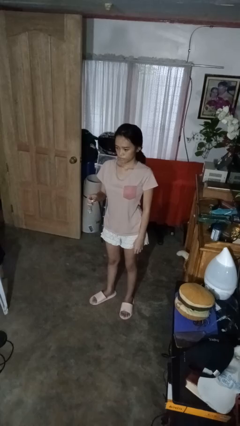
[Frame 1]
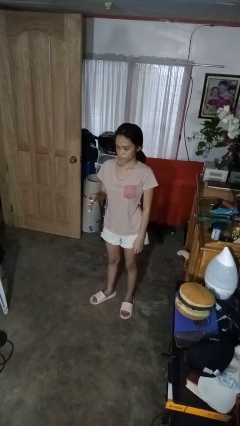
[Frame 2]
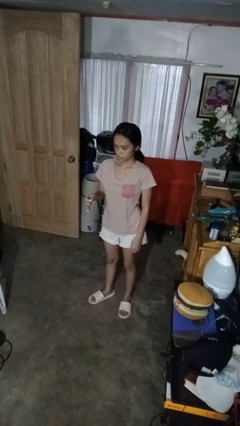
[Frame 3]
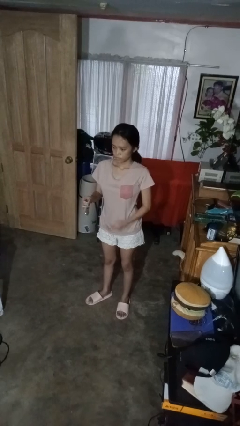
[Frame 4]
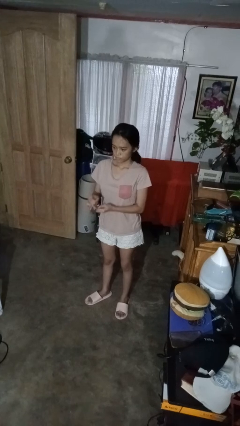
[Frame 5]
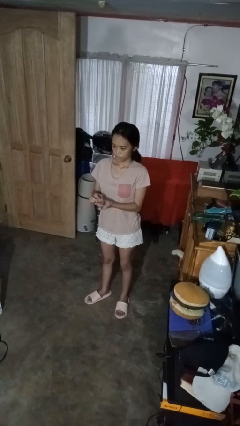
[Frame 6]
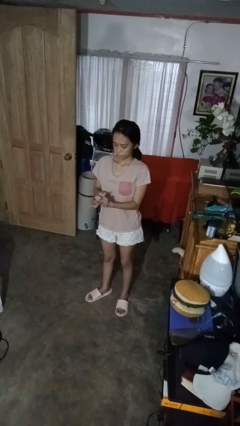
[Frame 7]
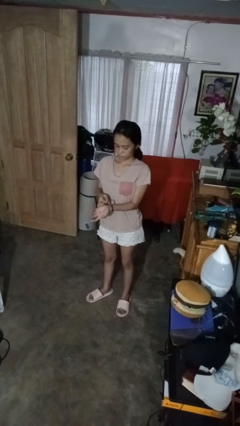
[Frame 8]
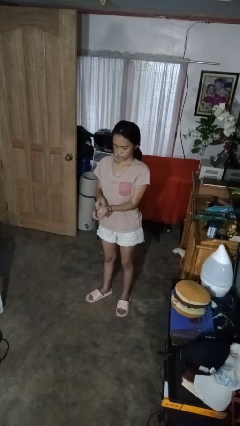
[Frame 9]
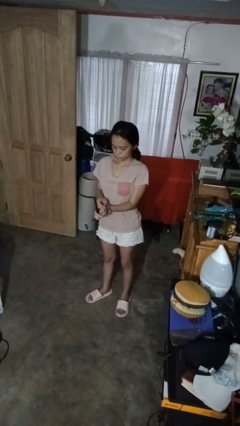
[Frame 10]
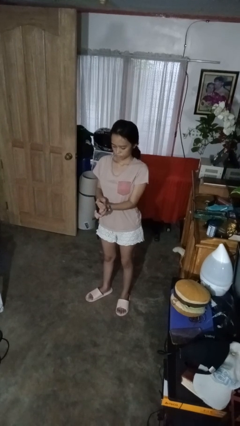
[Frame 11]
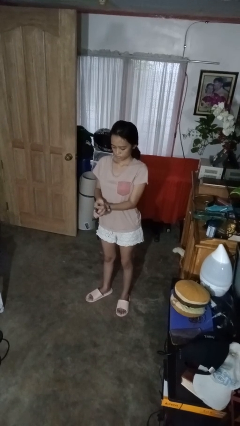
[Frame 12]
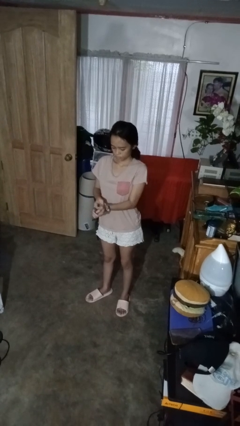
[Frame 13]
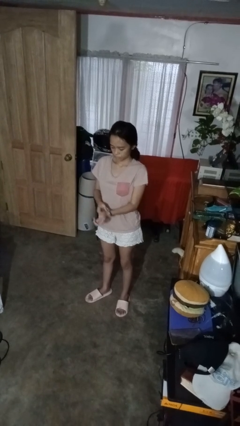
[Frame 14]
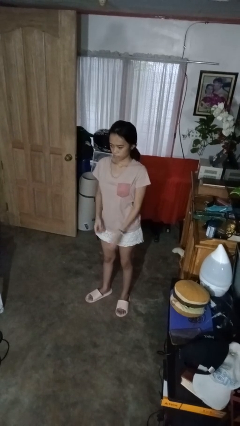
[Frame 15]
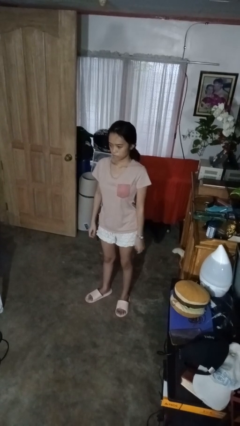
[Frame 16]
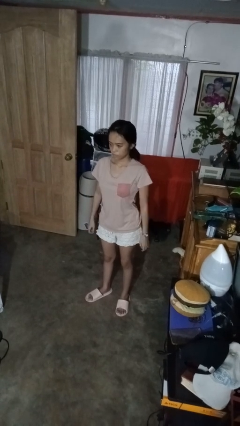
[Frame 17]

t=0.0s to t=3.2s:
person puts on wristwatch

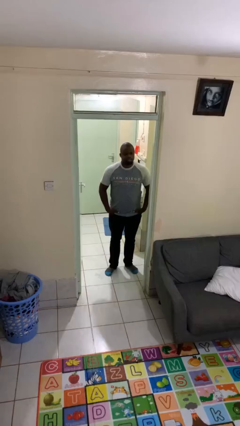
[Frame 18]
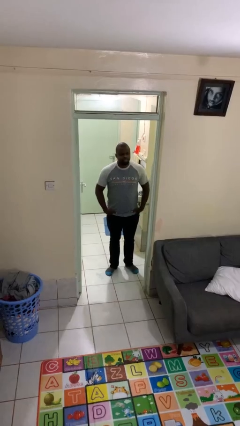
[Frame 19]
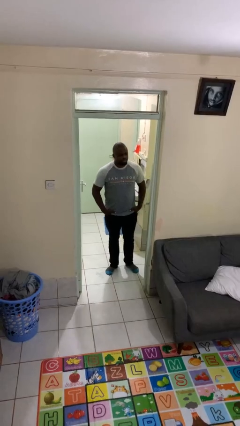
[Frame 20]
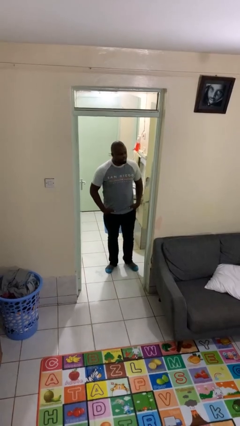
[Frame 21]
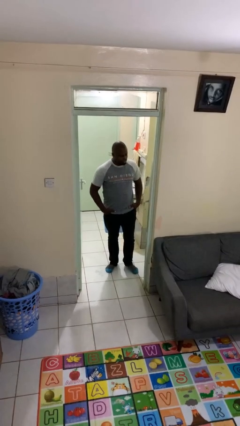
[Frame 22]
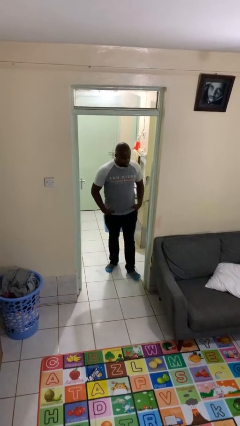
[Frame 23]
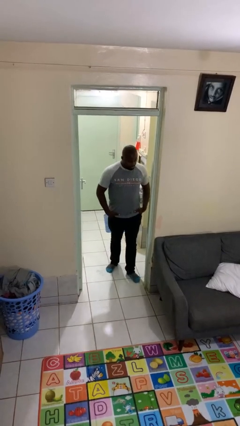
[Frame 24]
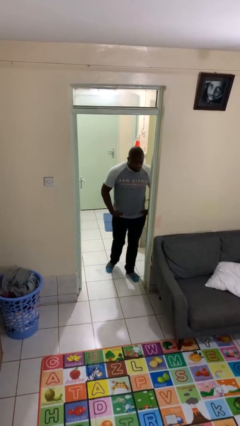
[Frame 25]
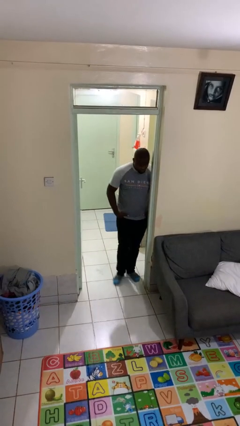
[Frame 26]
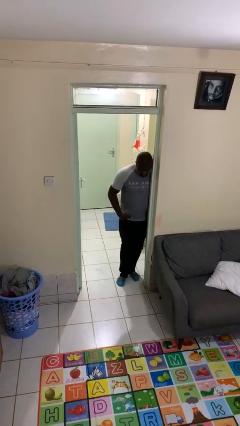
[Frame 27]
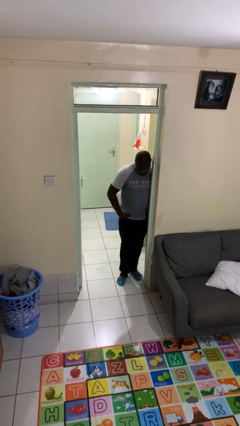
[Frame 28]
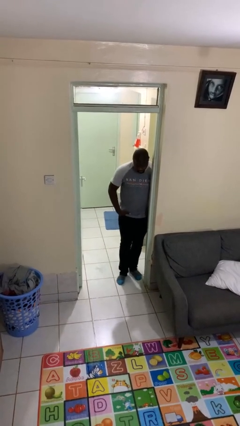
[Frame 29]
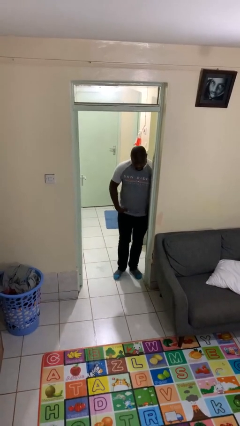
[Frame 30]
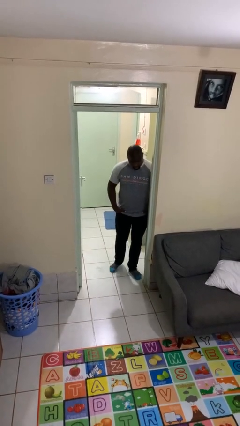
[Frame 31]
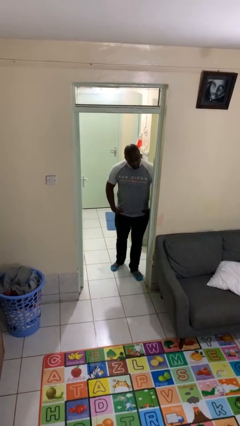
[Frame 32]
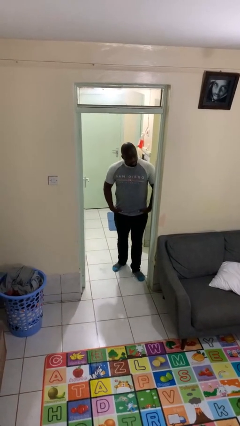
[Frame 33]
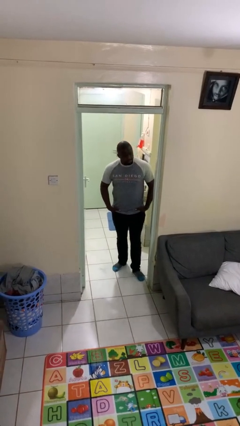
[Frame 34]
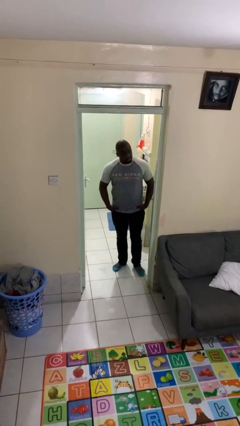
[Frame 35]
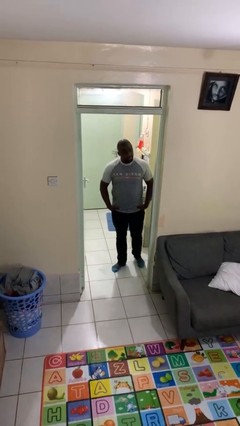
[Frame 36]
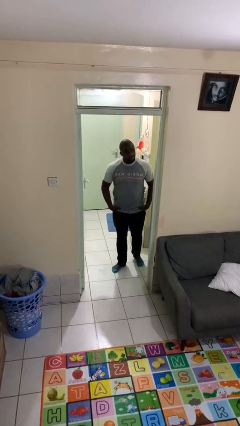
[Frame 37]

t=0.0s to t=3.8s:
person bumps into wall

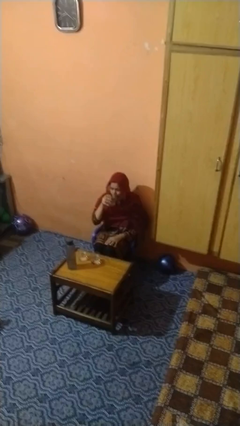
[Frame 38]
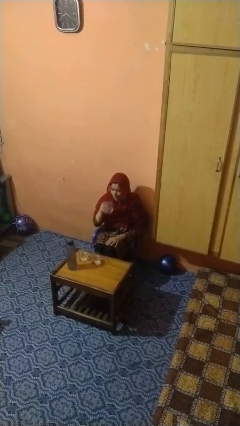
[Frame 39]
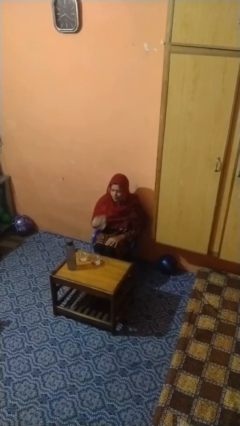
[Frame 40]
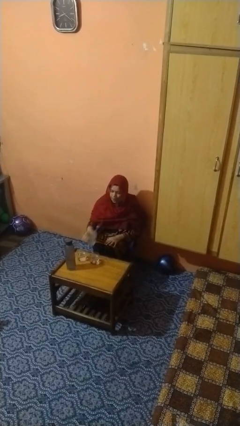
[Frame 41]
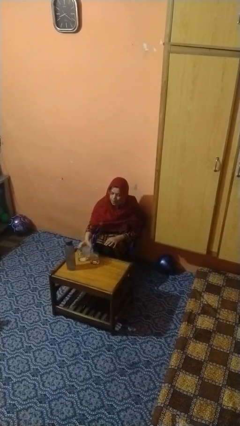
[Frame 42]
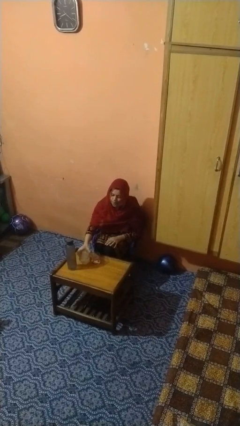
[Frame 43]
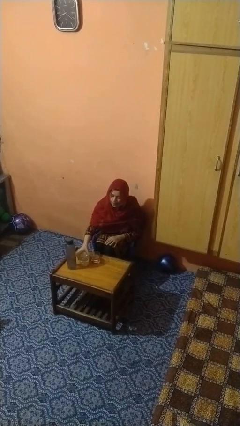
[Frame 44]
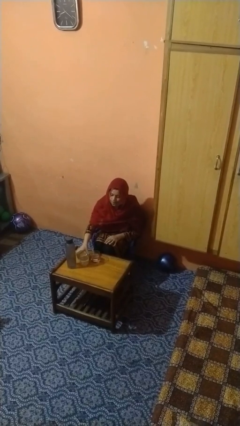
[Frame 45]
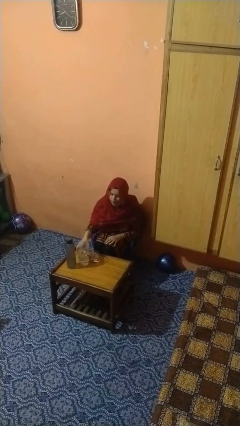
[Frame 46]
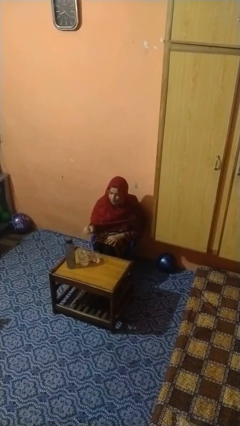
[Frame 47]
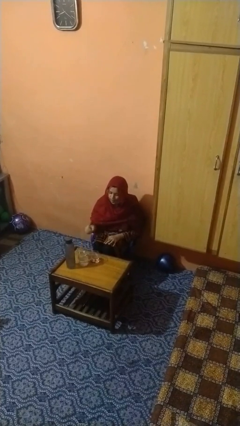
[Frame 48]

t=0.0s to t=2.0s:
person puts down object on table

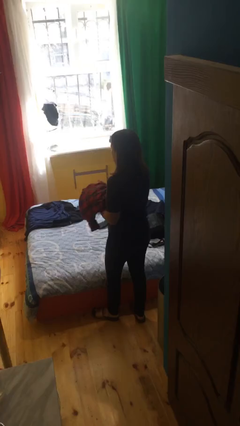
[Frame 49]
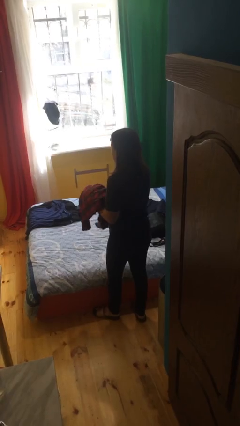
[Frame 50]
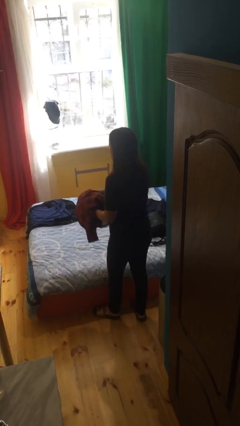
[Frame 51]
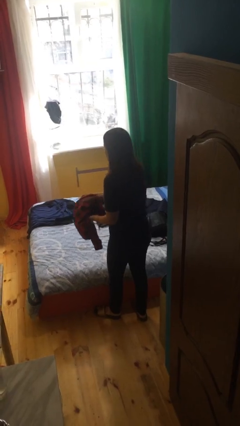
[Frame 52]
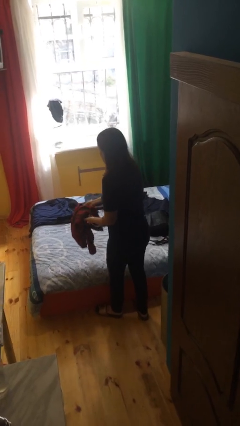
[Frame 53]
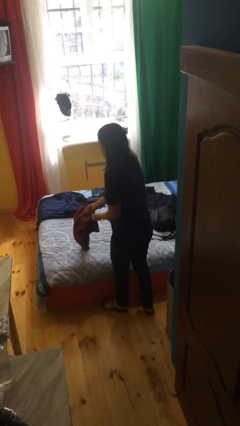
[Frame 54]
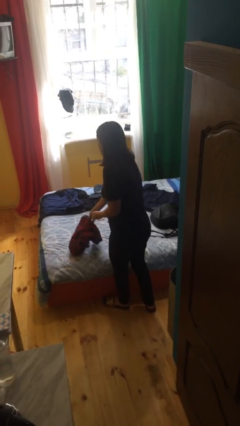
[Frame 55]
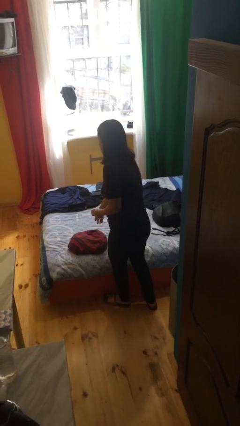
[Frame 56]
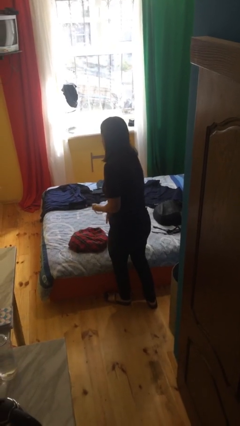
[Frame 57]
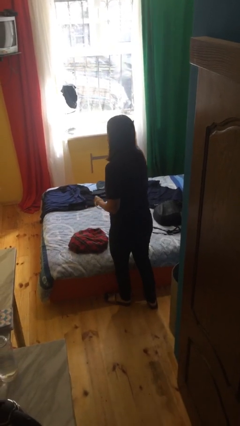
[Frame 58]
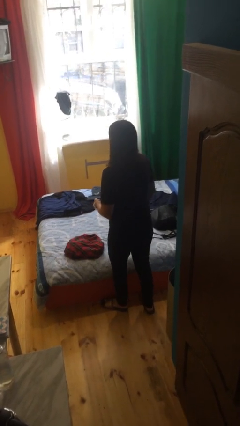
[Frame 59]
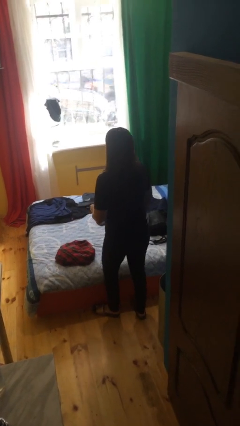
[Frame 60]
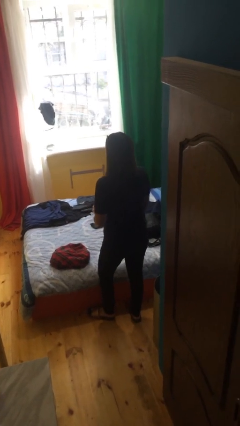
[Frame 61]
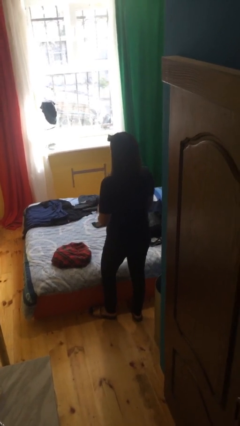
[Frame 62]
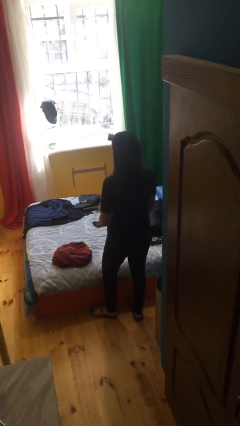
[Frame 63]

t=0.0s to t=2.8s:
person puts down object on bed

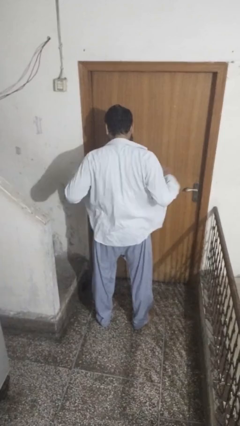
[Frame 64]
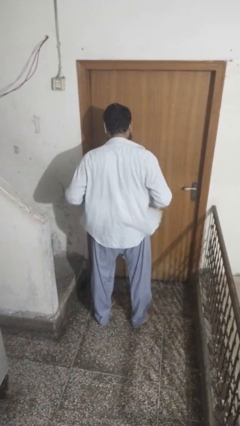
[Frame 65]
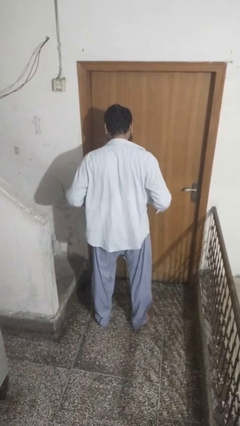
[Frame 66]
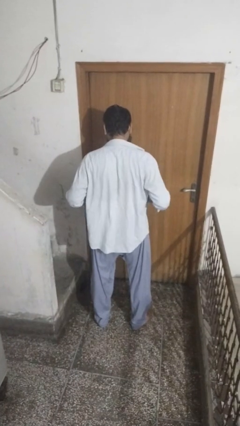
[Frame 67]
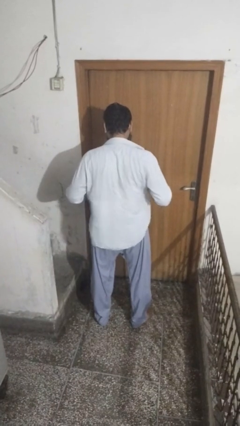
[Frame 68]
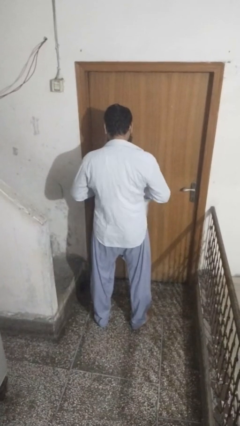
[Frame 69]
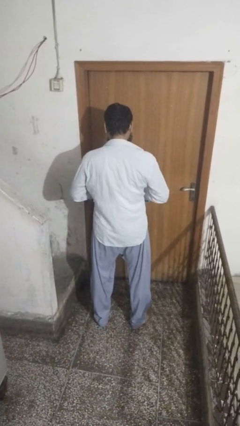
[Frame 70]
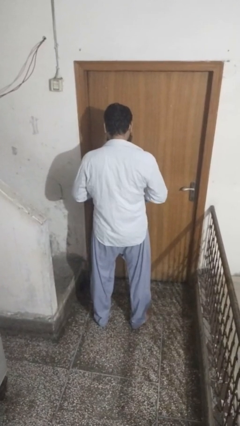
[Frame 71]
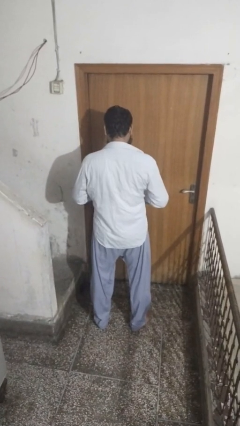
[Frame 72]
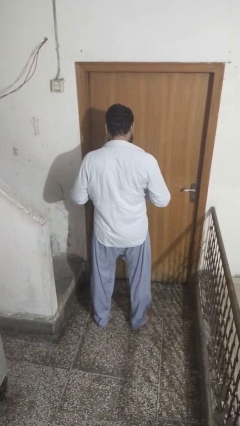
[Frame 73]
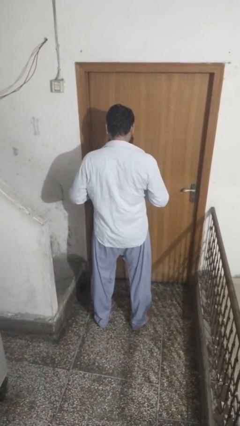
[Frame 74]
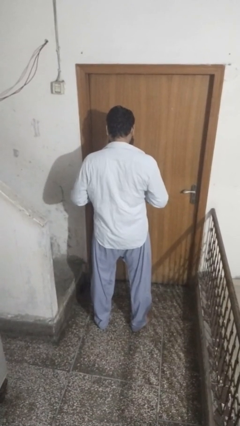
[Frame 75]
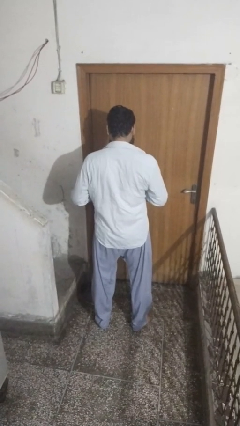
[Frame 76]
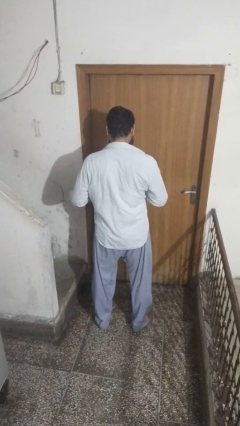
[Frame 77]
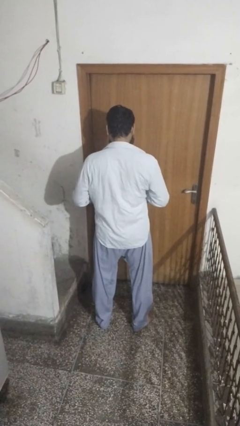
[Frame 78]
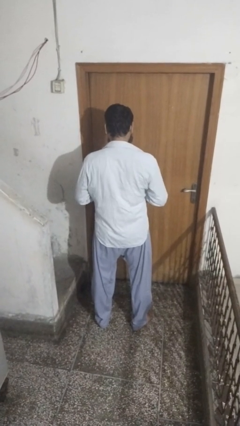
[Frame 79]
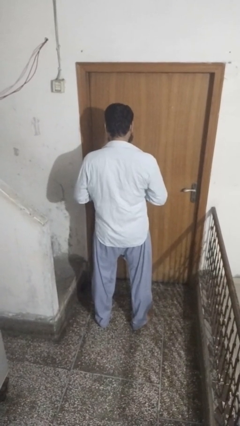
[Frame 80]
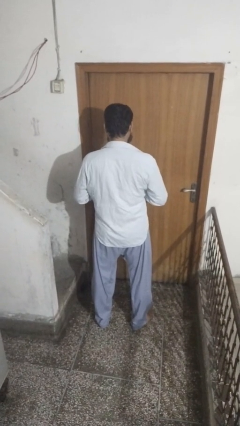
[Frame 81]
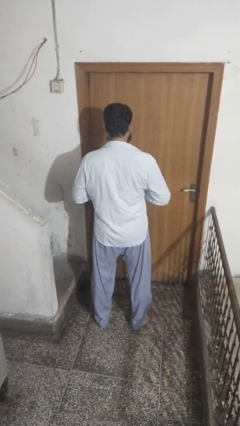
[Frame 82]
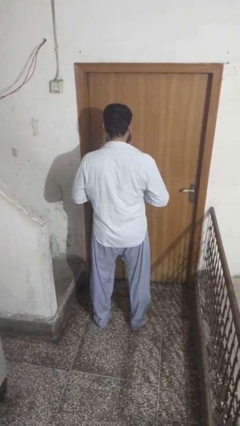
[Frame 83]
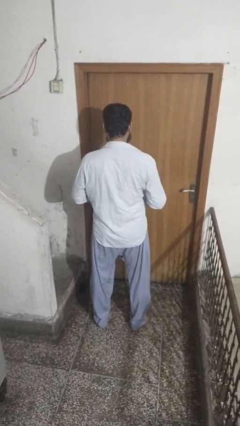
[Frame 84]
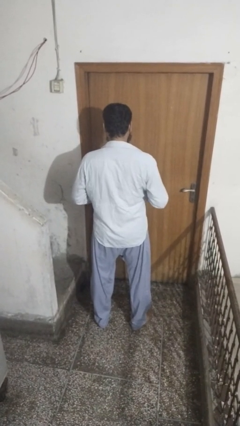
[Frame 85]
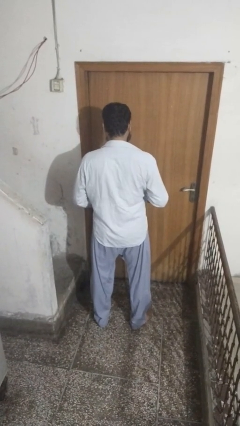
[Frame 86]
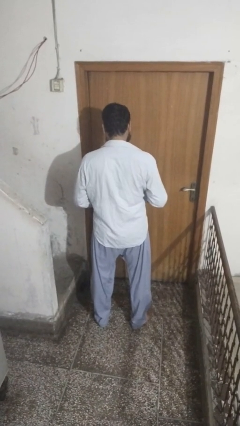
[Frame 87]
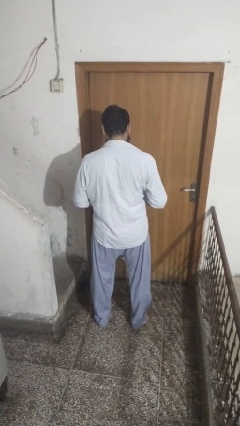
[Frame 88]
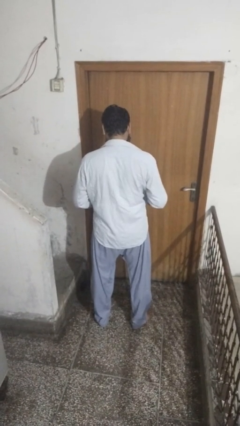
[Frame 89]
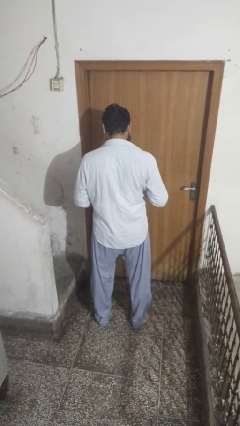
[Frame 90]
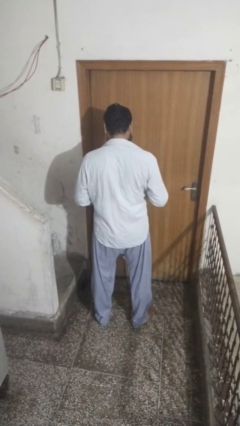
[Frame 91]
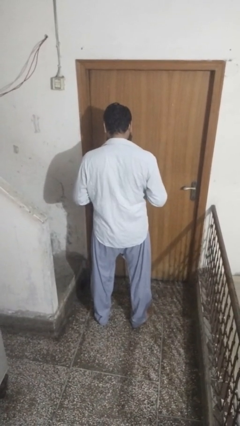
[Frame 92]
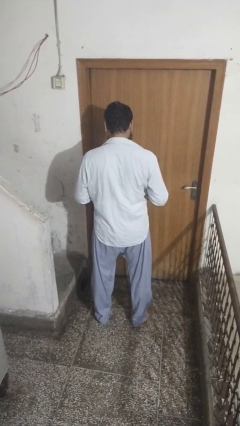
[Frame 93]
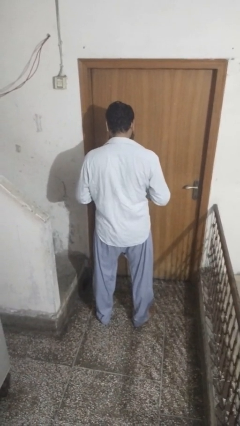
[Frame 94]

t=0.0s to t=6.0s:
person buttons shirt
